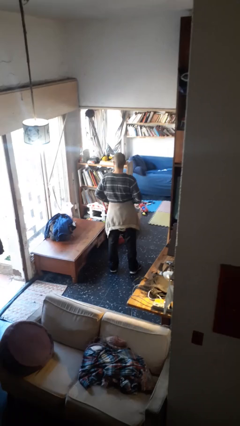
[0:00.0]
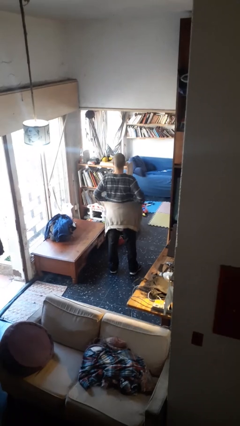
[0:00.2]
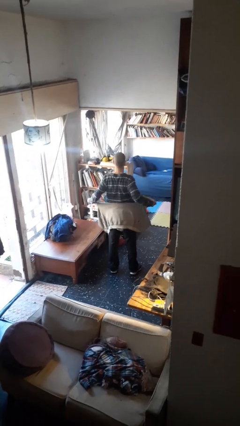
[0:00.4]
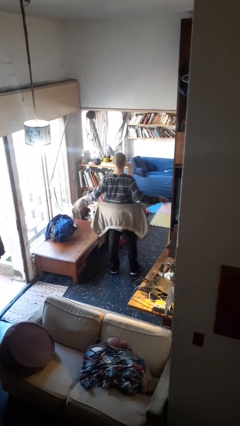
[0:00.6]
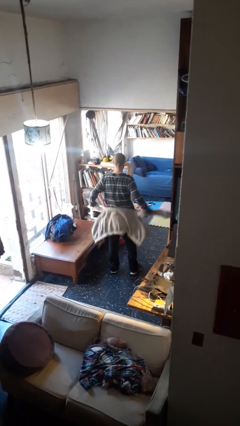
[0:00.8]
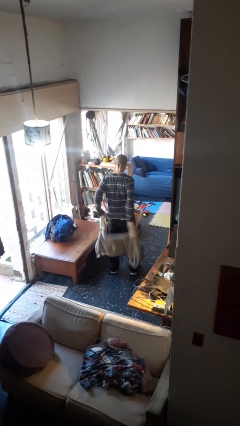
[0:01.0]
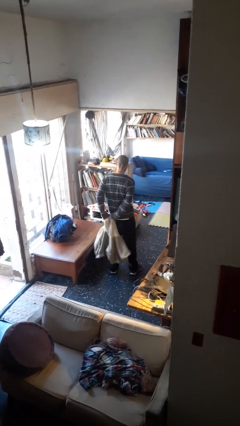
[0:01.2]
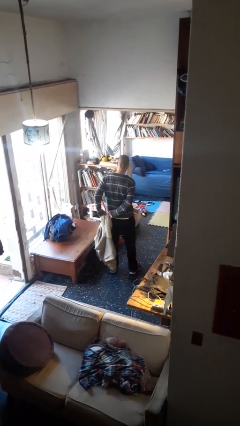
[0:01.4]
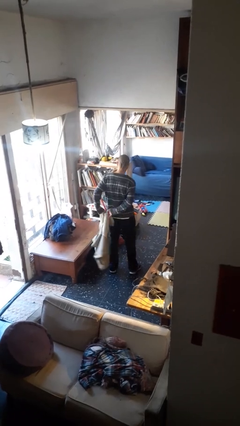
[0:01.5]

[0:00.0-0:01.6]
person unties jacket around waist

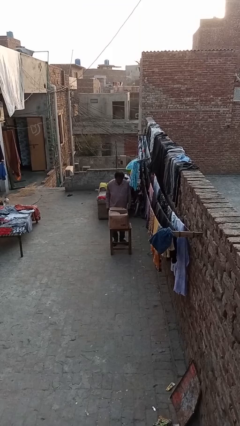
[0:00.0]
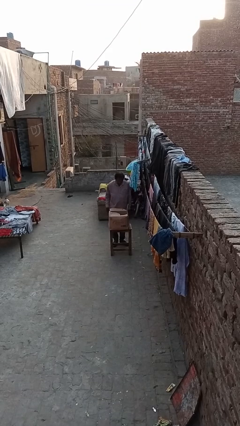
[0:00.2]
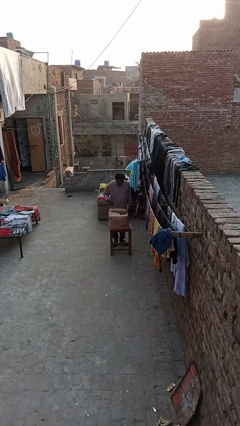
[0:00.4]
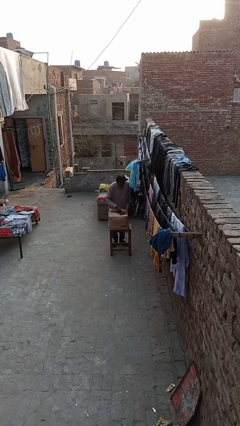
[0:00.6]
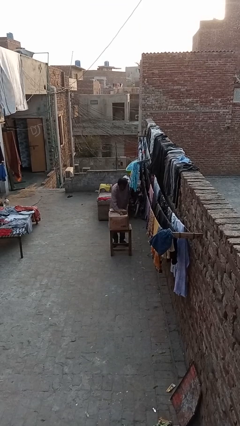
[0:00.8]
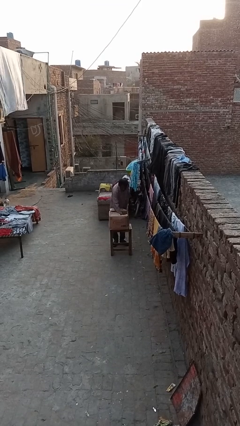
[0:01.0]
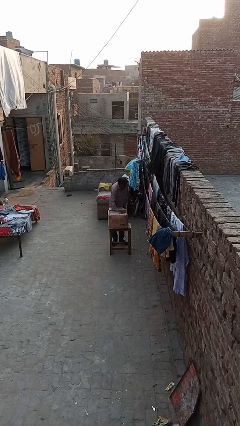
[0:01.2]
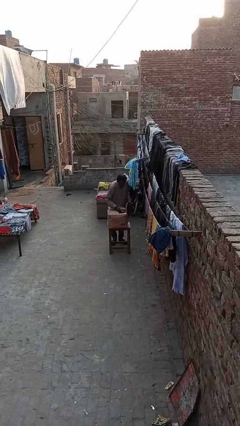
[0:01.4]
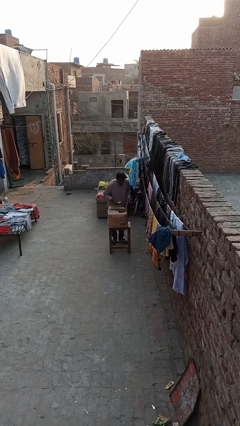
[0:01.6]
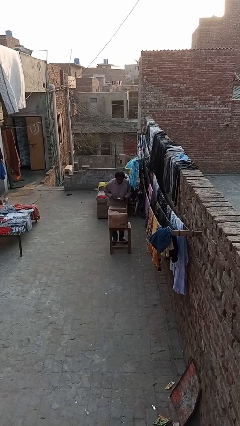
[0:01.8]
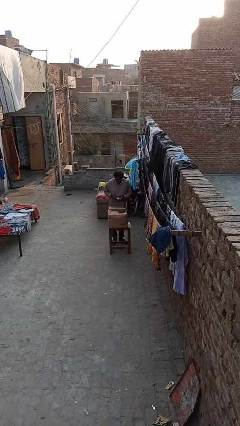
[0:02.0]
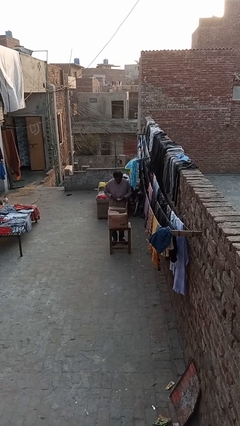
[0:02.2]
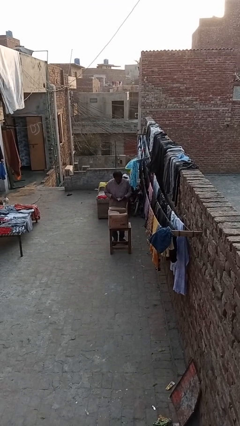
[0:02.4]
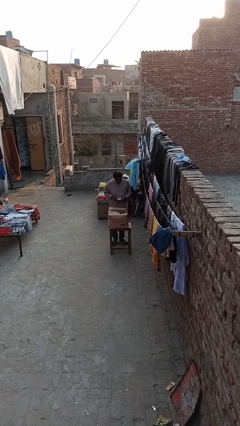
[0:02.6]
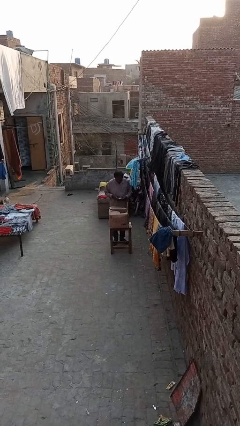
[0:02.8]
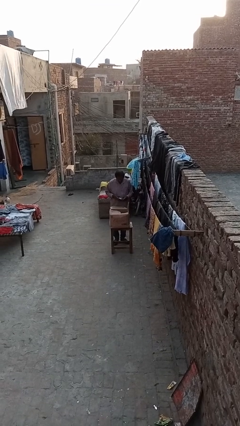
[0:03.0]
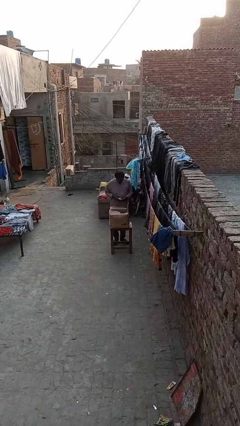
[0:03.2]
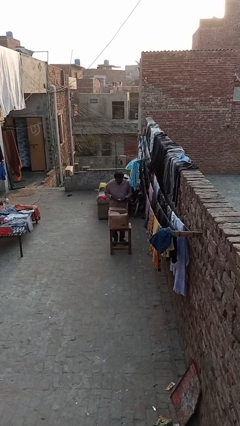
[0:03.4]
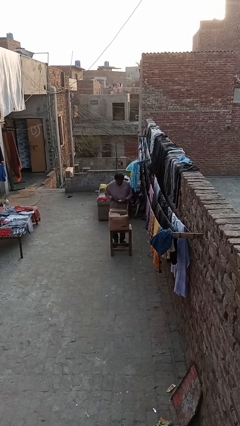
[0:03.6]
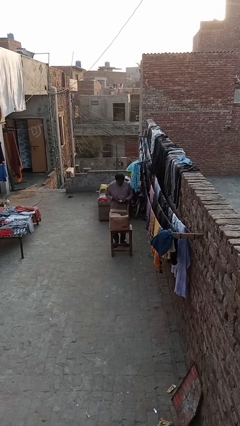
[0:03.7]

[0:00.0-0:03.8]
person takes object from box

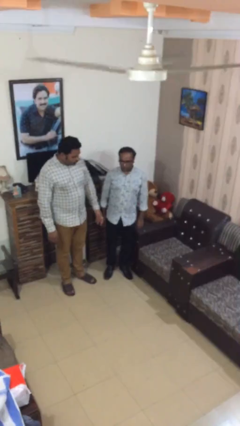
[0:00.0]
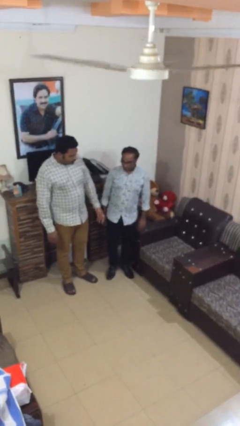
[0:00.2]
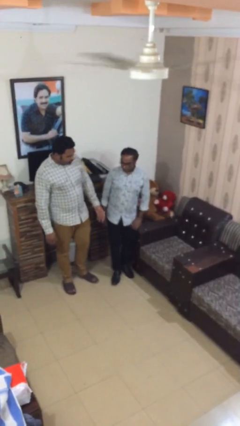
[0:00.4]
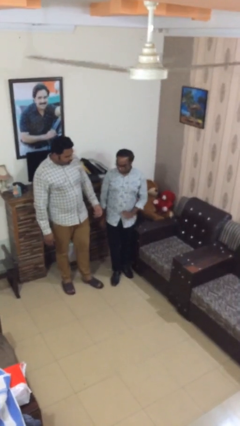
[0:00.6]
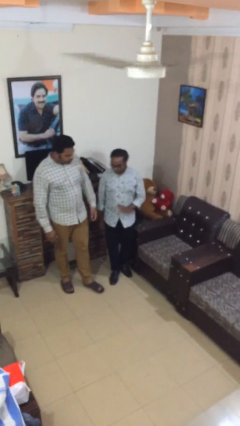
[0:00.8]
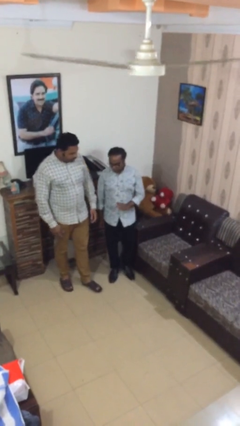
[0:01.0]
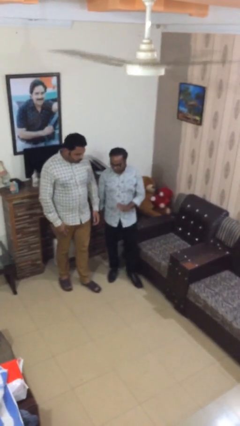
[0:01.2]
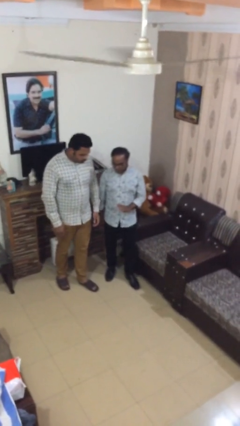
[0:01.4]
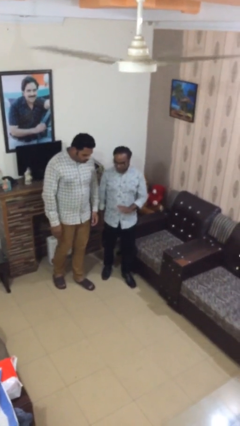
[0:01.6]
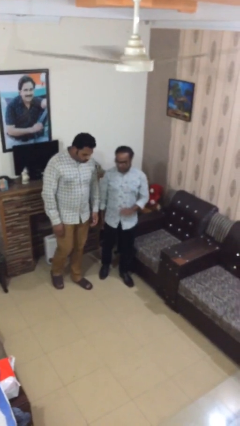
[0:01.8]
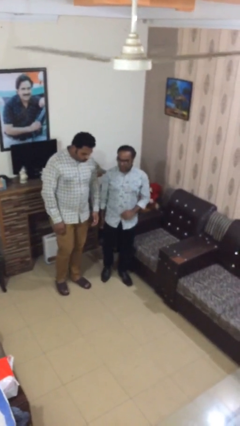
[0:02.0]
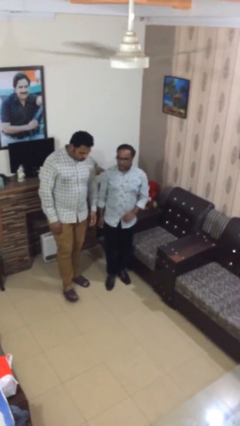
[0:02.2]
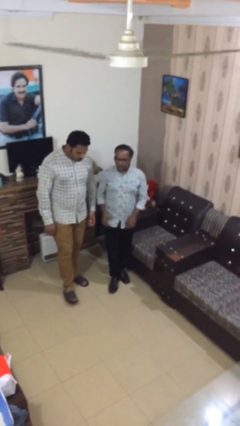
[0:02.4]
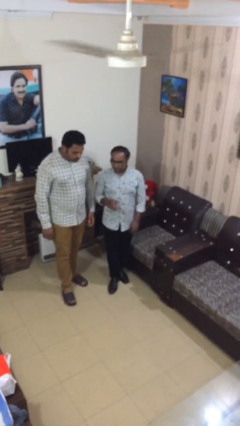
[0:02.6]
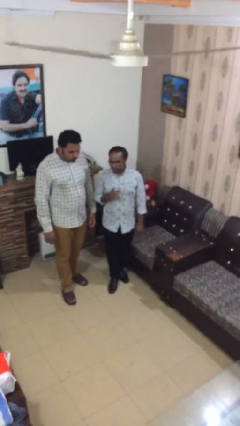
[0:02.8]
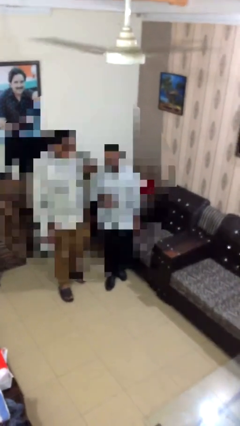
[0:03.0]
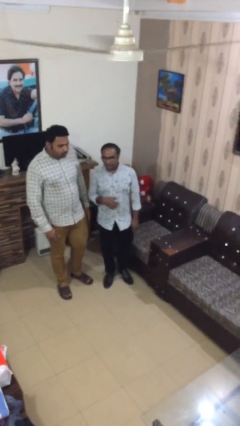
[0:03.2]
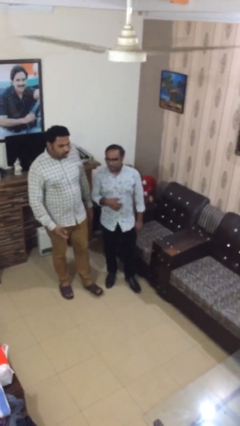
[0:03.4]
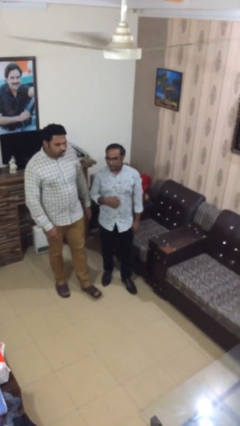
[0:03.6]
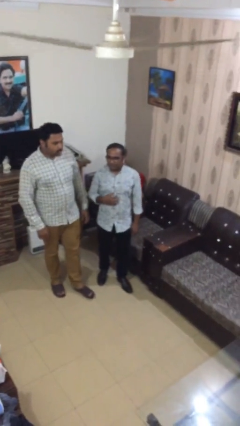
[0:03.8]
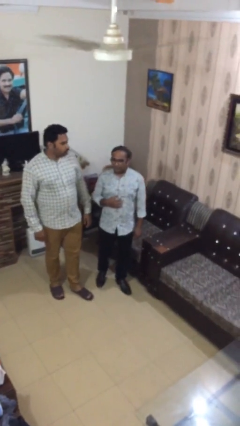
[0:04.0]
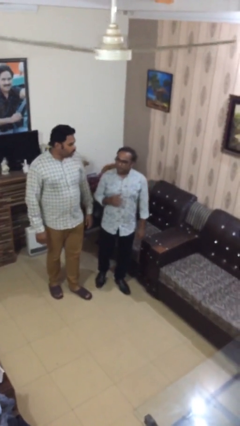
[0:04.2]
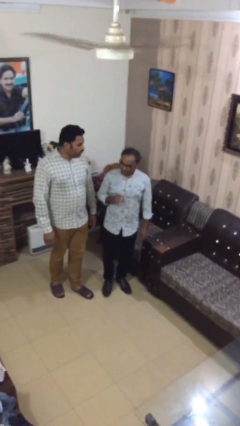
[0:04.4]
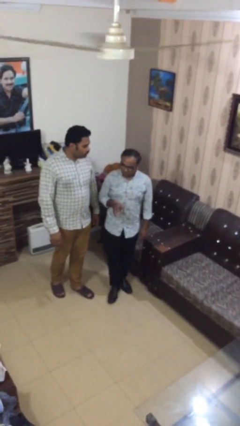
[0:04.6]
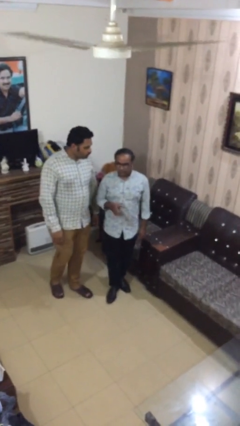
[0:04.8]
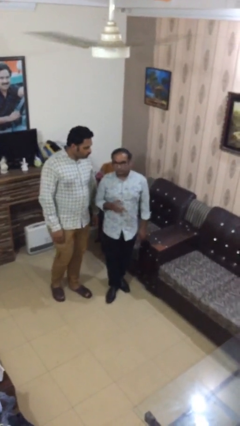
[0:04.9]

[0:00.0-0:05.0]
person talks to person

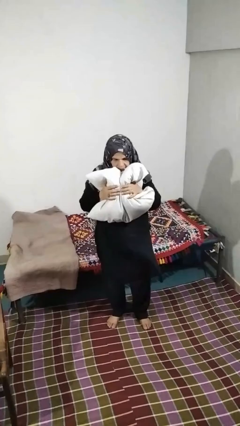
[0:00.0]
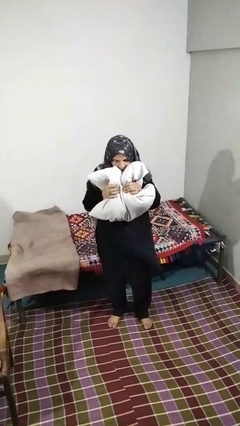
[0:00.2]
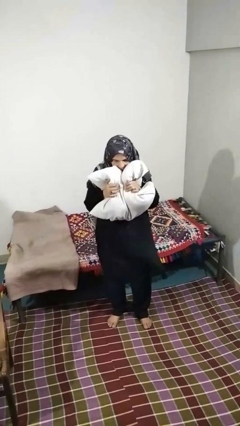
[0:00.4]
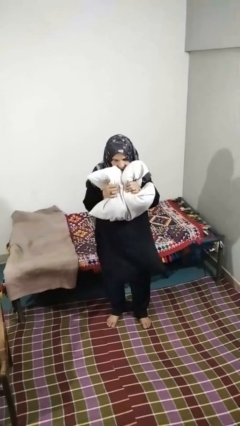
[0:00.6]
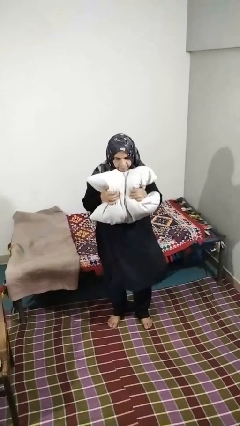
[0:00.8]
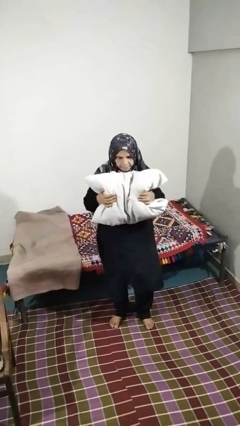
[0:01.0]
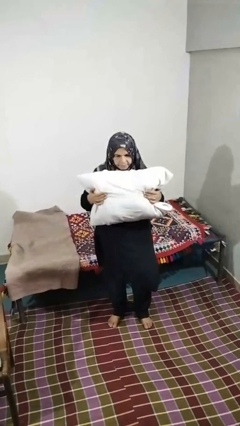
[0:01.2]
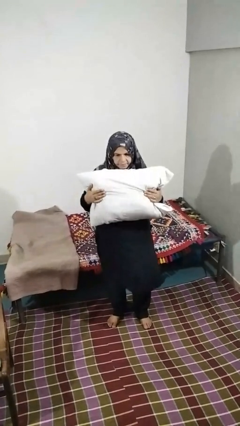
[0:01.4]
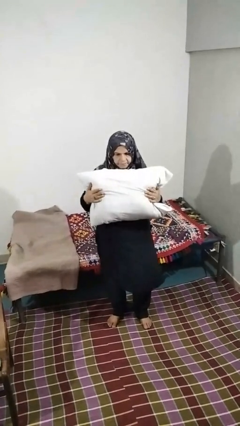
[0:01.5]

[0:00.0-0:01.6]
person squeezes object

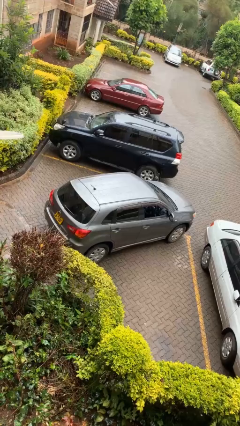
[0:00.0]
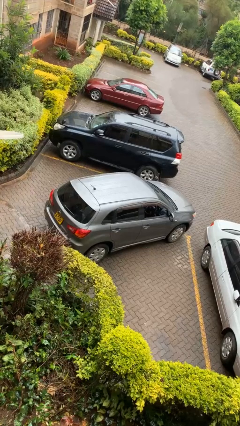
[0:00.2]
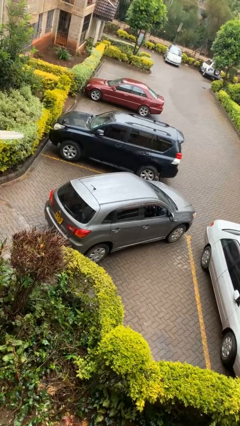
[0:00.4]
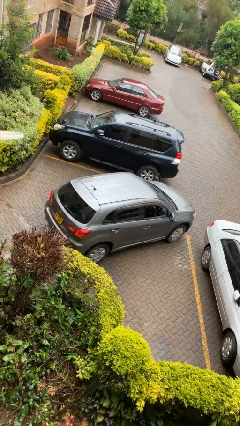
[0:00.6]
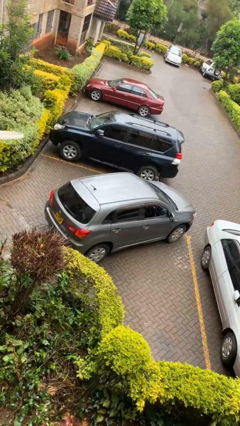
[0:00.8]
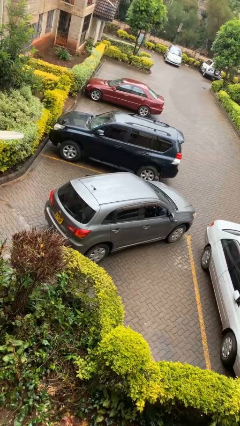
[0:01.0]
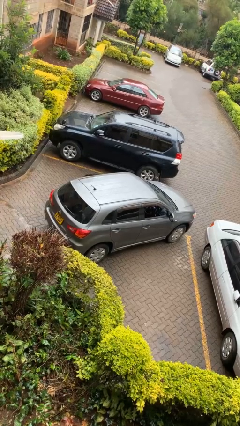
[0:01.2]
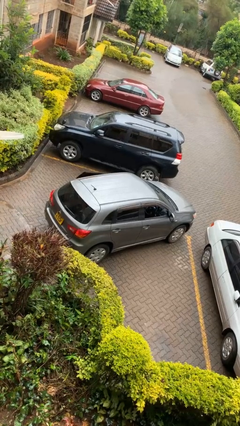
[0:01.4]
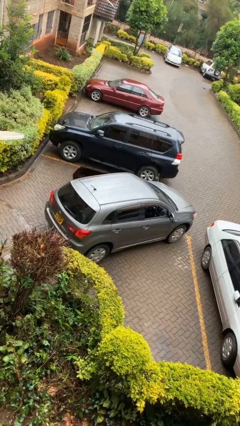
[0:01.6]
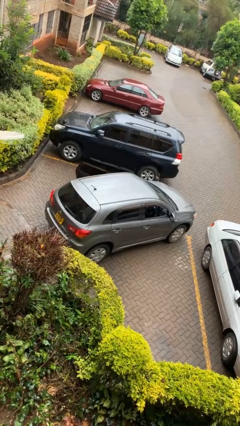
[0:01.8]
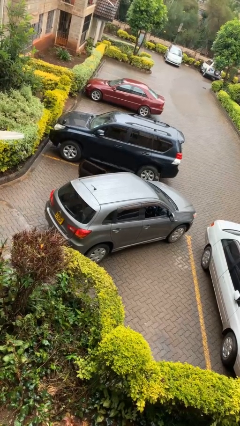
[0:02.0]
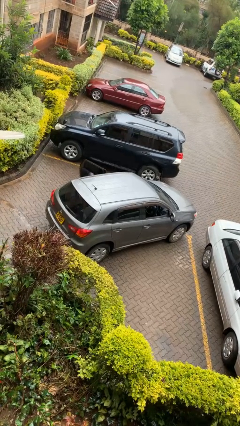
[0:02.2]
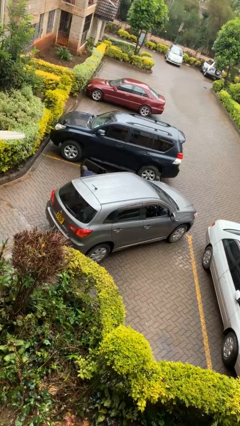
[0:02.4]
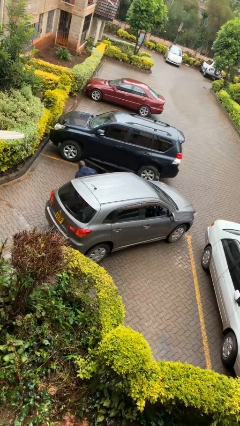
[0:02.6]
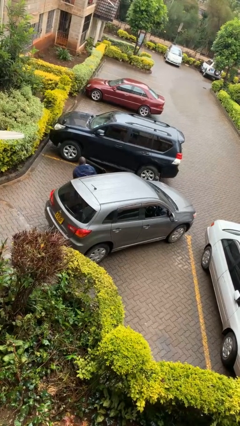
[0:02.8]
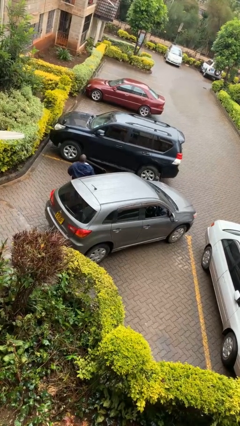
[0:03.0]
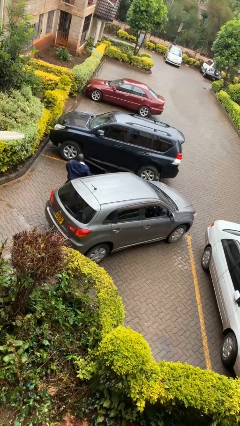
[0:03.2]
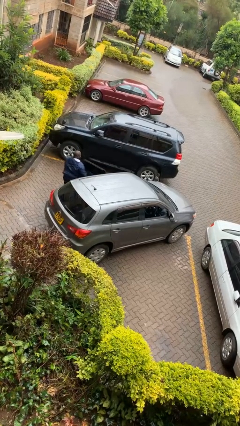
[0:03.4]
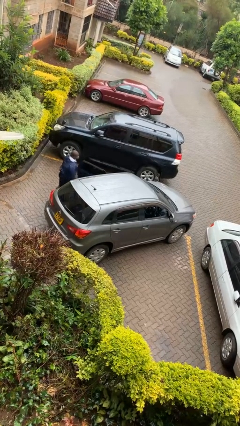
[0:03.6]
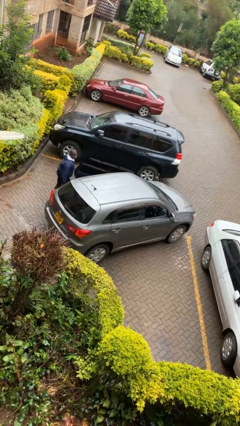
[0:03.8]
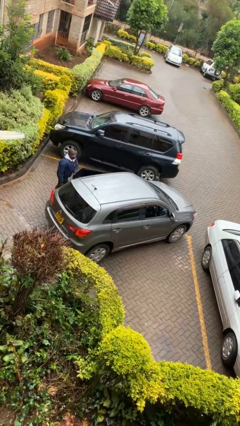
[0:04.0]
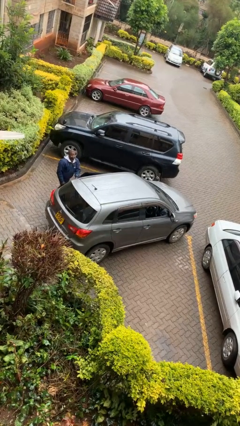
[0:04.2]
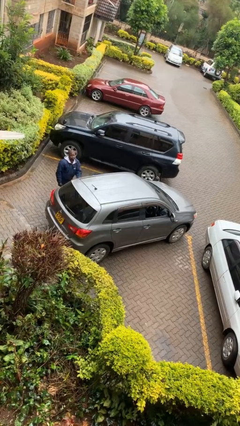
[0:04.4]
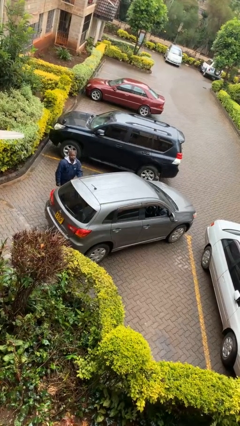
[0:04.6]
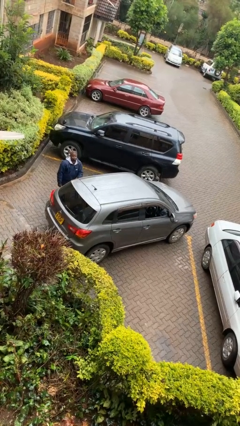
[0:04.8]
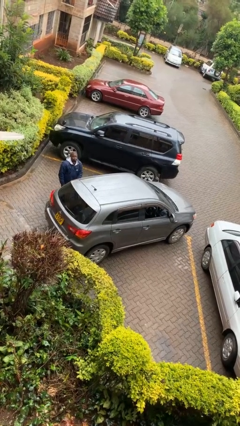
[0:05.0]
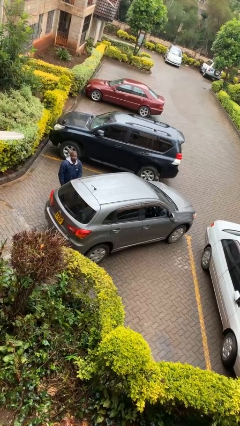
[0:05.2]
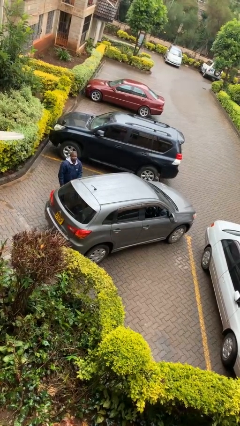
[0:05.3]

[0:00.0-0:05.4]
car drops off person
